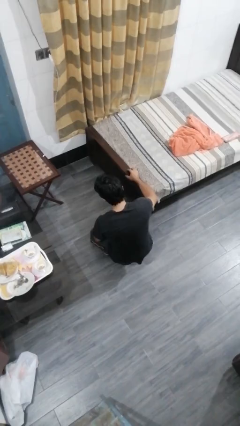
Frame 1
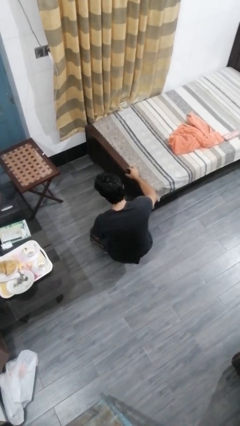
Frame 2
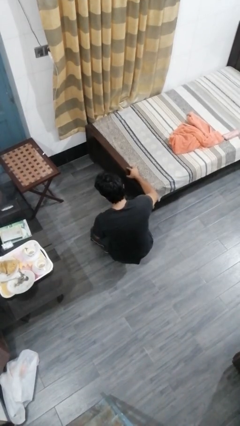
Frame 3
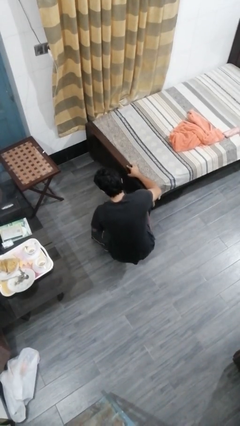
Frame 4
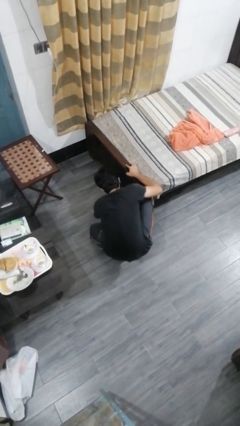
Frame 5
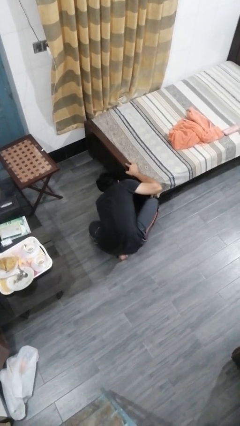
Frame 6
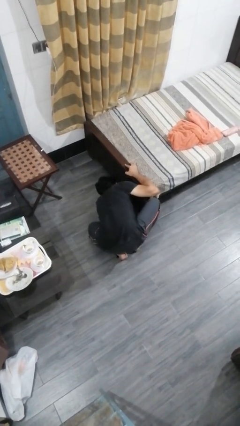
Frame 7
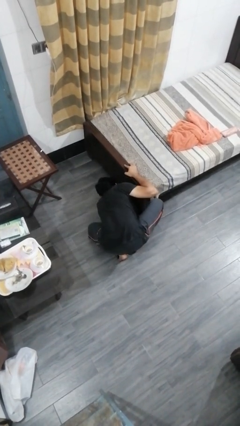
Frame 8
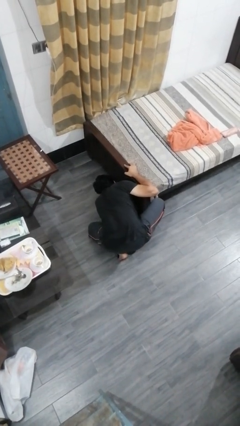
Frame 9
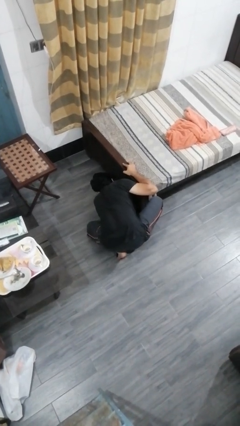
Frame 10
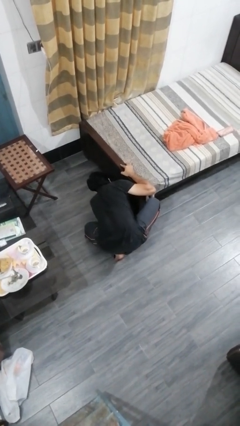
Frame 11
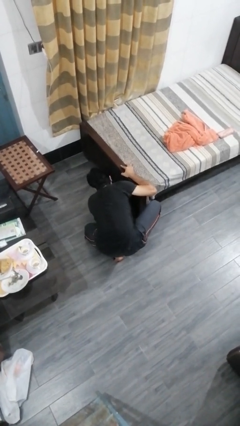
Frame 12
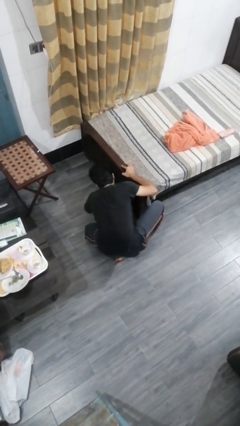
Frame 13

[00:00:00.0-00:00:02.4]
person searches under bed

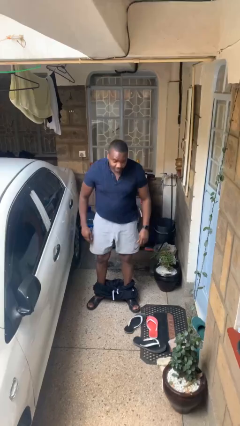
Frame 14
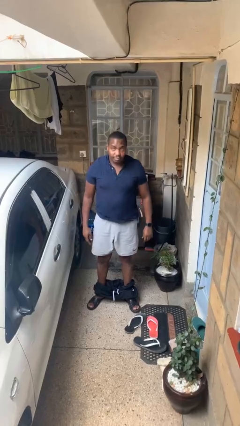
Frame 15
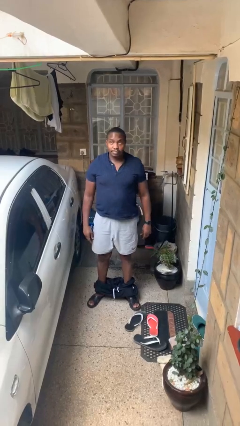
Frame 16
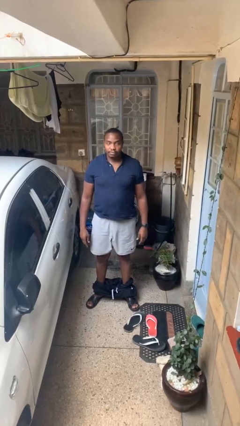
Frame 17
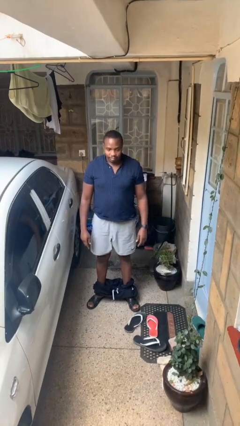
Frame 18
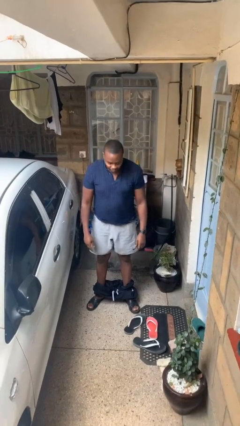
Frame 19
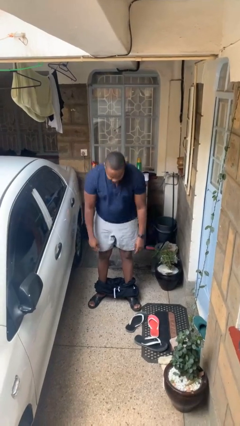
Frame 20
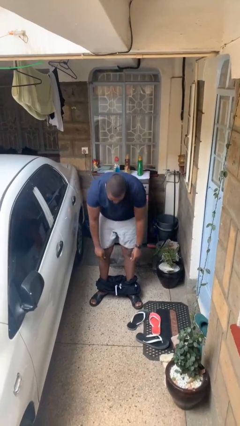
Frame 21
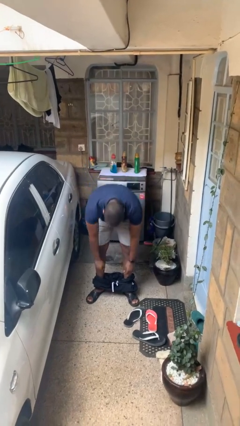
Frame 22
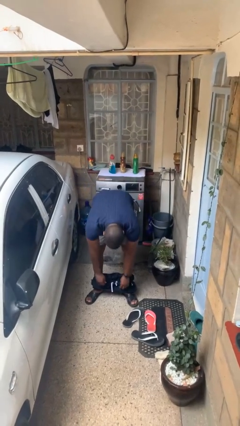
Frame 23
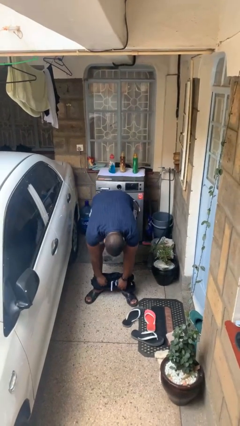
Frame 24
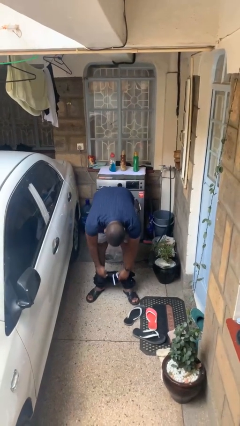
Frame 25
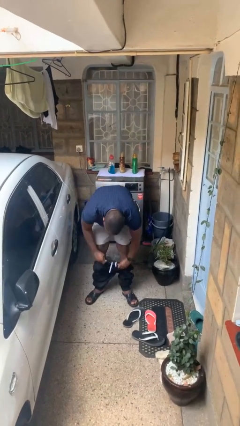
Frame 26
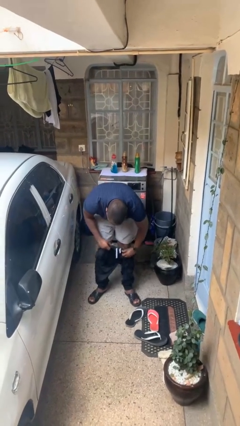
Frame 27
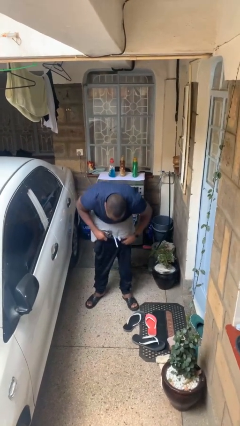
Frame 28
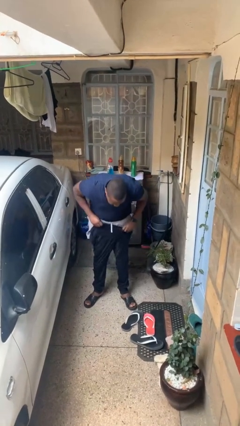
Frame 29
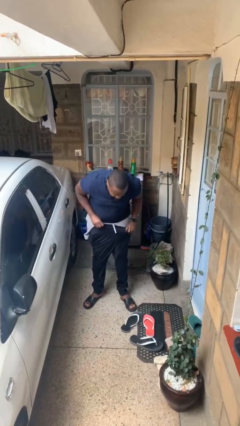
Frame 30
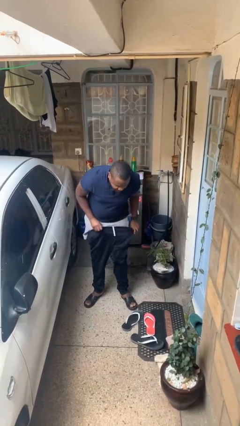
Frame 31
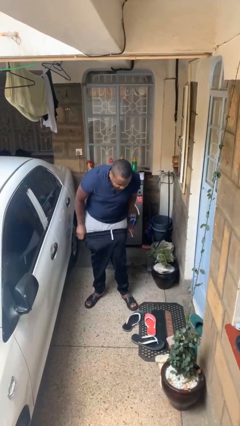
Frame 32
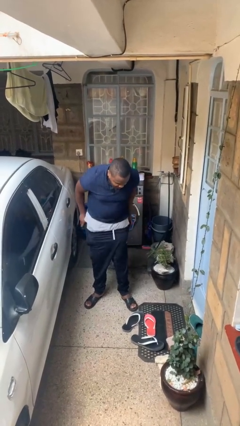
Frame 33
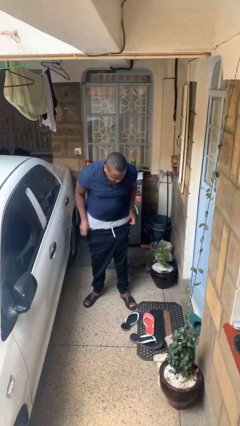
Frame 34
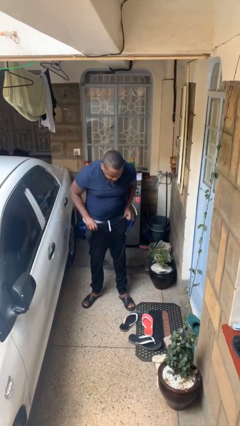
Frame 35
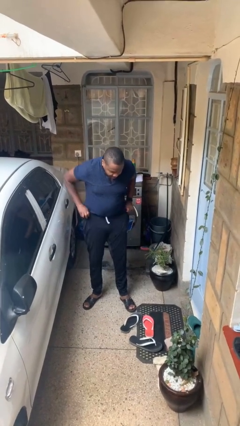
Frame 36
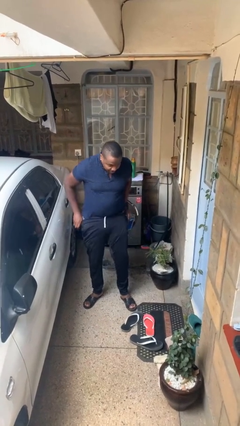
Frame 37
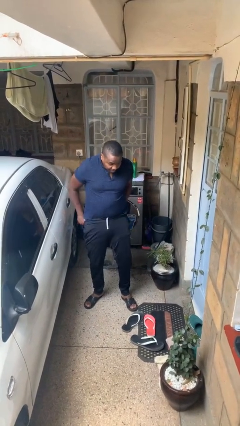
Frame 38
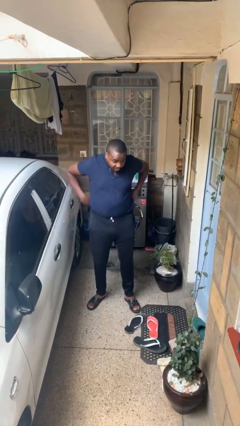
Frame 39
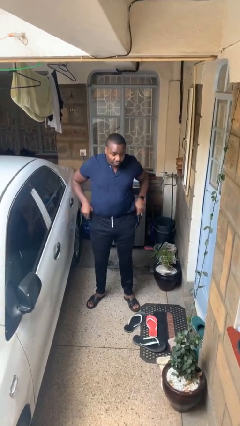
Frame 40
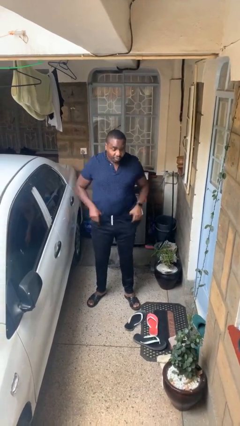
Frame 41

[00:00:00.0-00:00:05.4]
person puts on pants

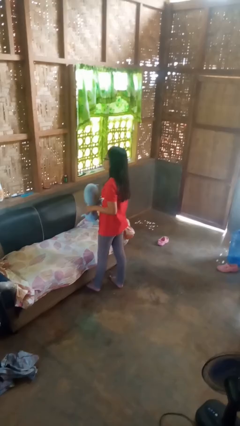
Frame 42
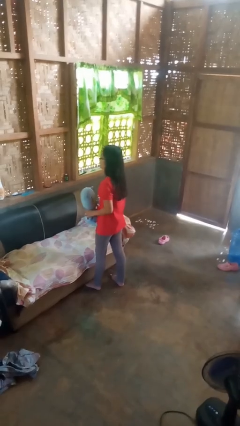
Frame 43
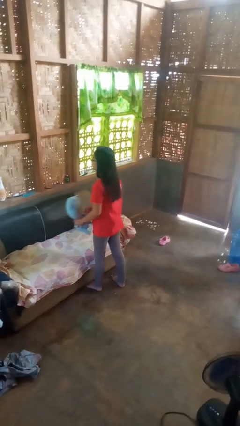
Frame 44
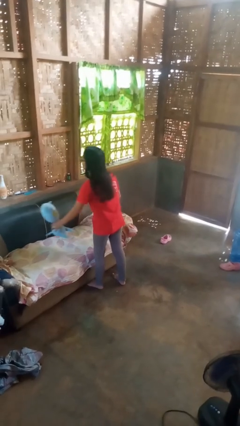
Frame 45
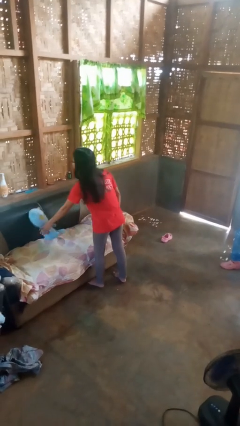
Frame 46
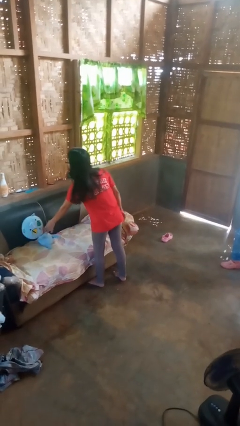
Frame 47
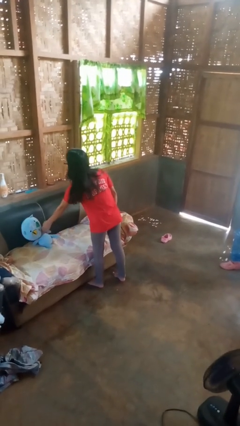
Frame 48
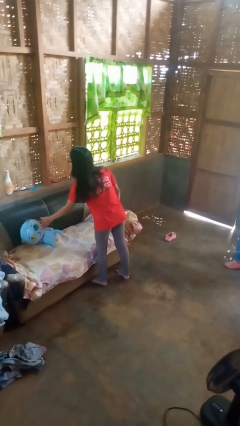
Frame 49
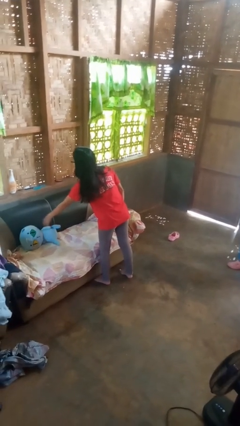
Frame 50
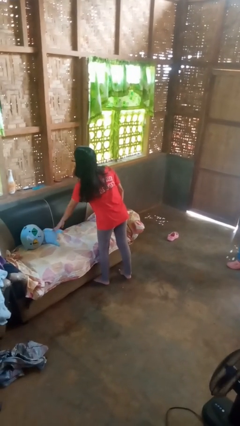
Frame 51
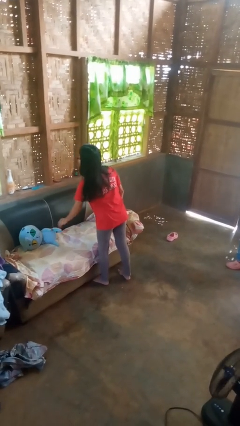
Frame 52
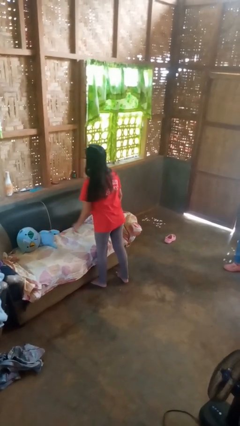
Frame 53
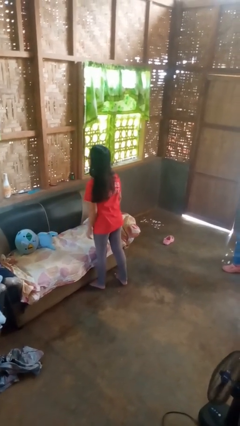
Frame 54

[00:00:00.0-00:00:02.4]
person puts down object on couch

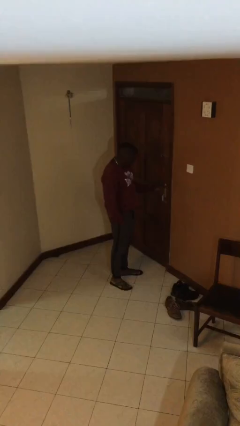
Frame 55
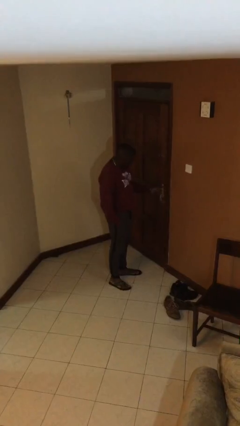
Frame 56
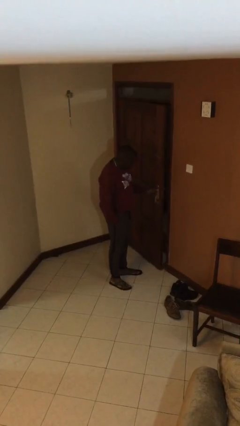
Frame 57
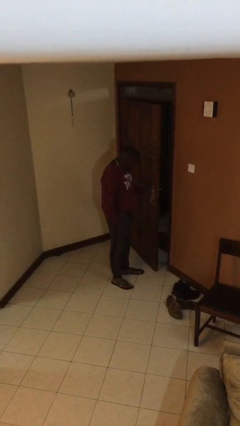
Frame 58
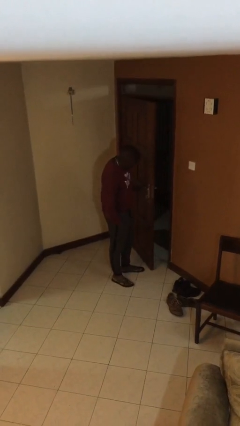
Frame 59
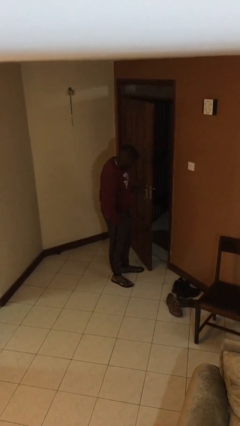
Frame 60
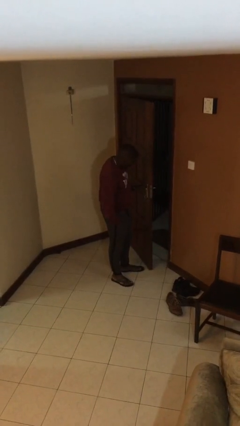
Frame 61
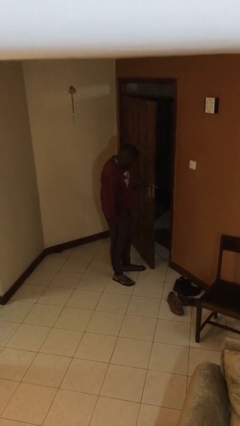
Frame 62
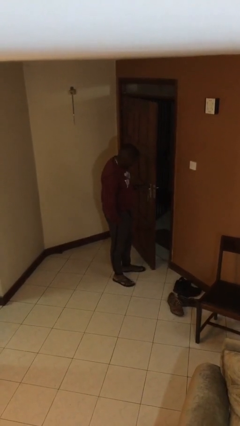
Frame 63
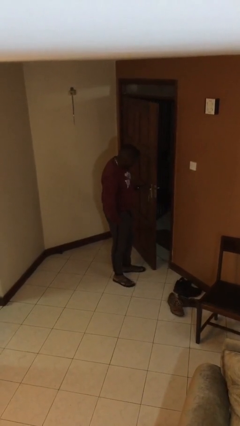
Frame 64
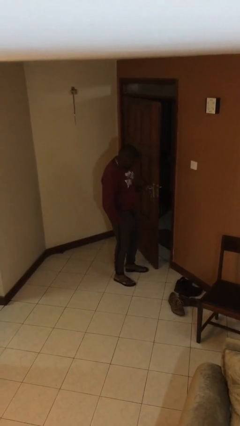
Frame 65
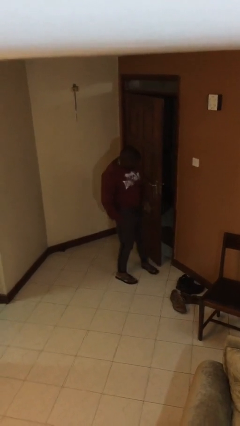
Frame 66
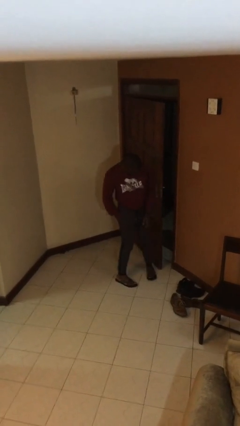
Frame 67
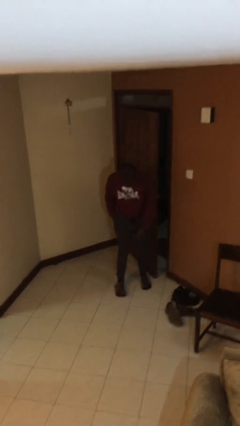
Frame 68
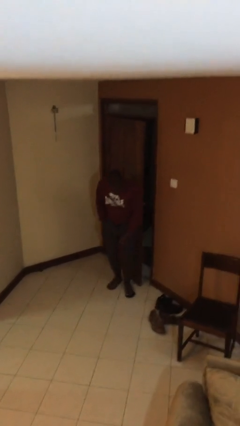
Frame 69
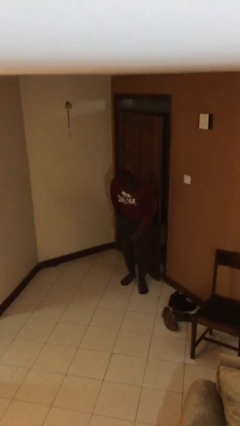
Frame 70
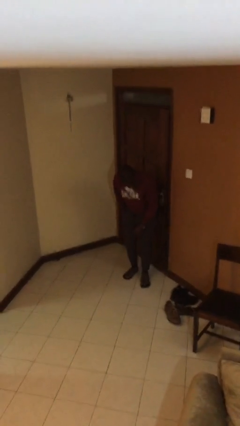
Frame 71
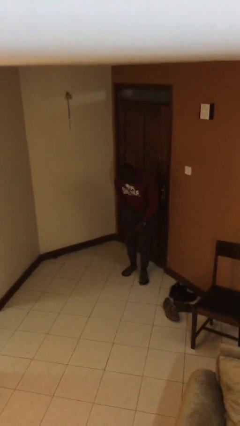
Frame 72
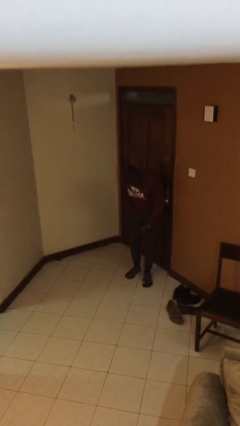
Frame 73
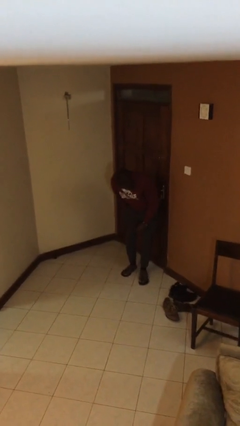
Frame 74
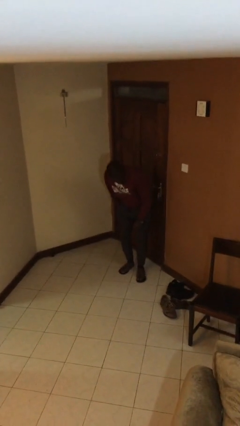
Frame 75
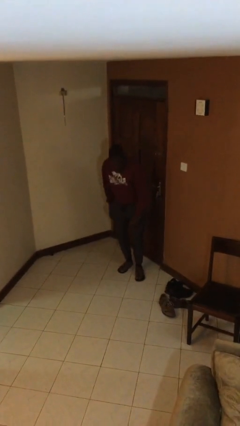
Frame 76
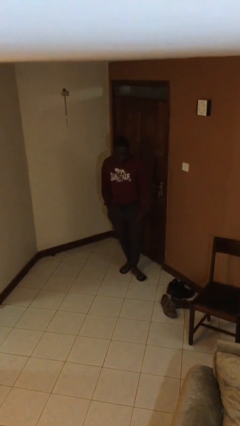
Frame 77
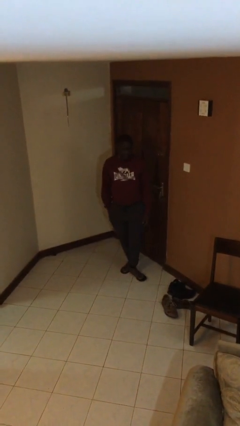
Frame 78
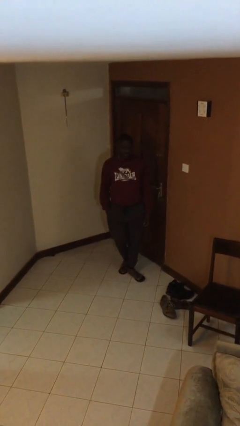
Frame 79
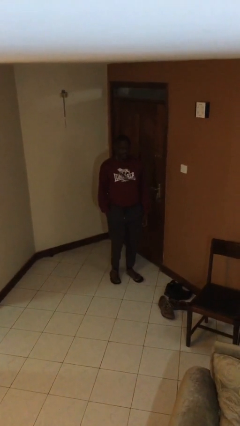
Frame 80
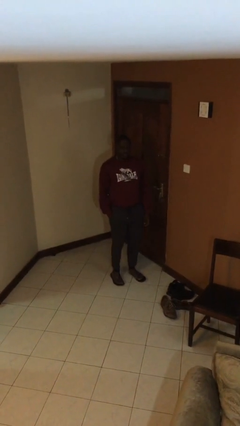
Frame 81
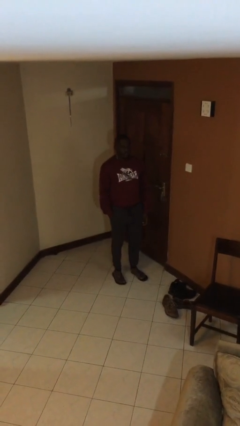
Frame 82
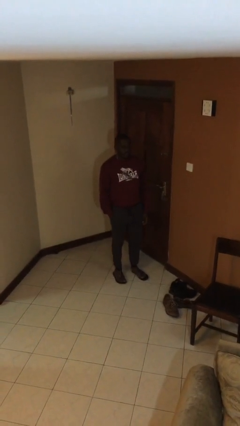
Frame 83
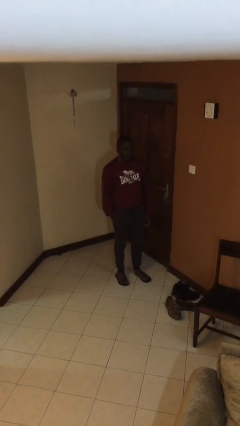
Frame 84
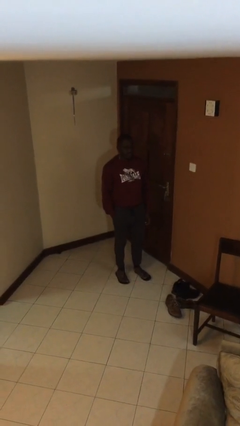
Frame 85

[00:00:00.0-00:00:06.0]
person opens facility door

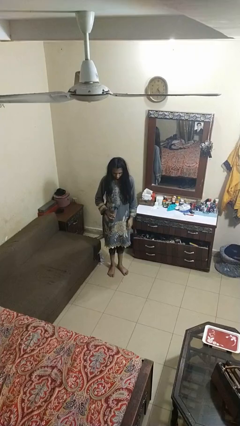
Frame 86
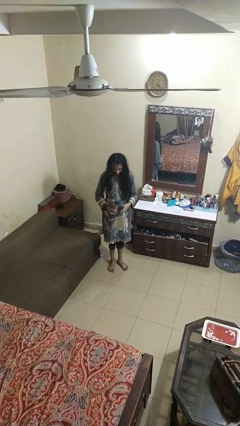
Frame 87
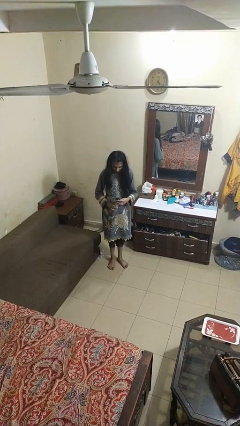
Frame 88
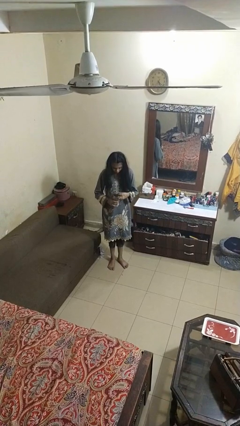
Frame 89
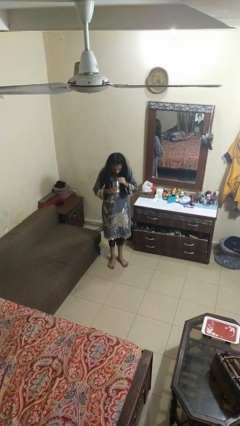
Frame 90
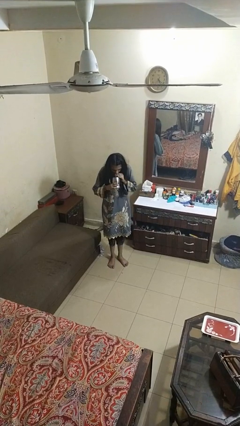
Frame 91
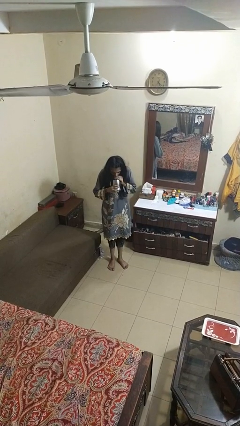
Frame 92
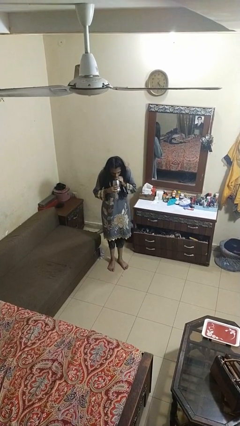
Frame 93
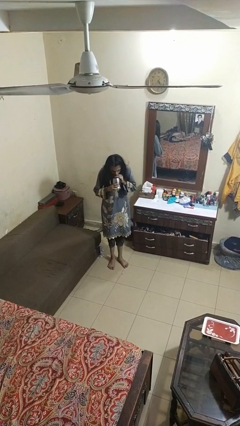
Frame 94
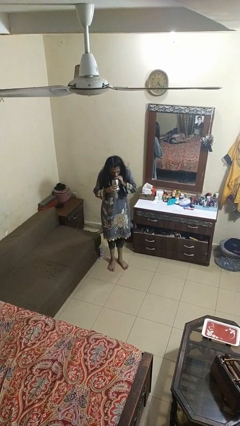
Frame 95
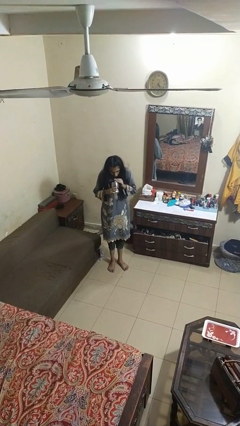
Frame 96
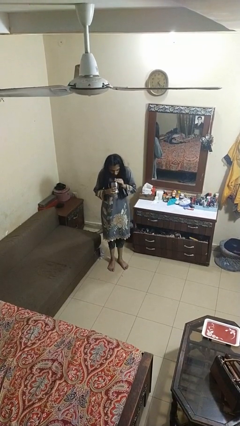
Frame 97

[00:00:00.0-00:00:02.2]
person drinks from straw
